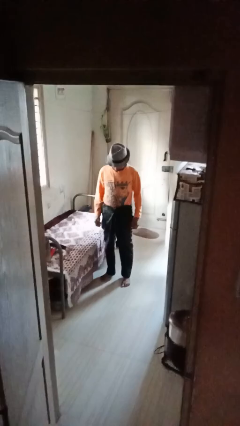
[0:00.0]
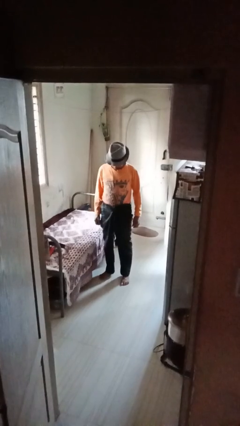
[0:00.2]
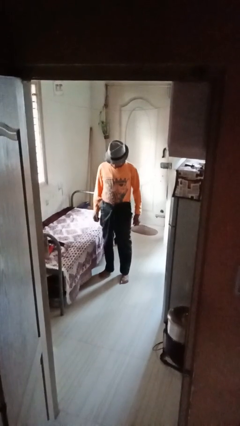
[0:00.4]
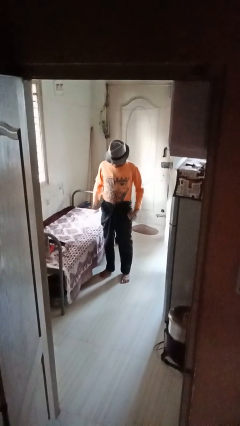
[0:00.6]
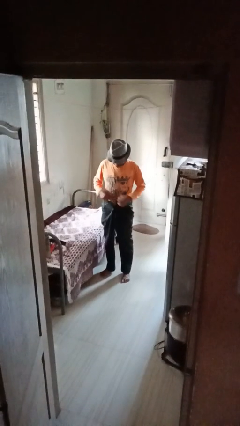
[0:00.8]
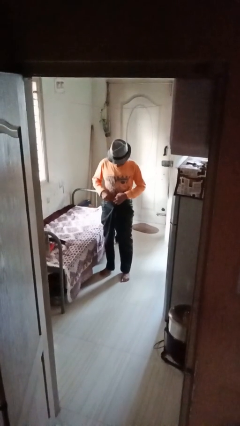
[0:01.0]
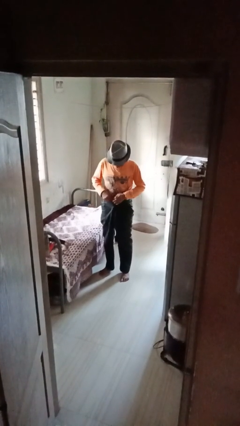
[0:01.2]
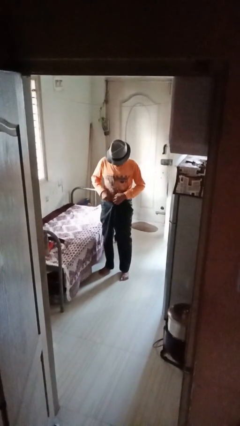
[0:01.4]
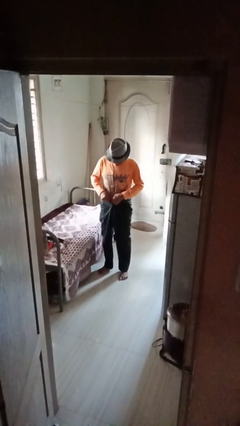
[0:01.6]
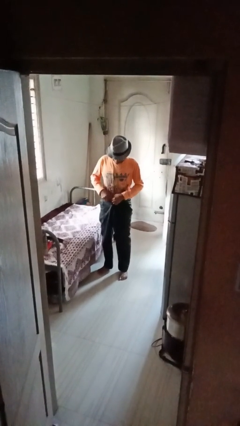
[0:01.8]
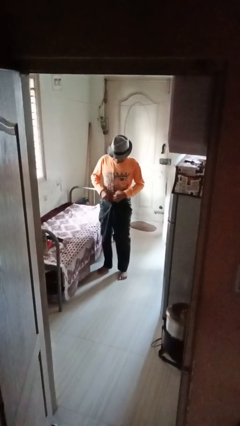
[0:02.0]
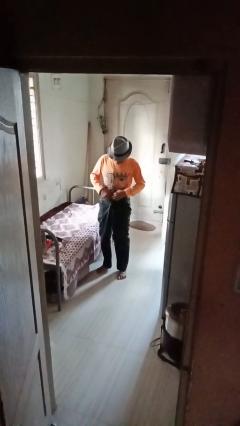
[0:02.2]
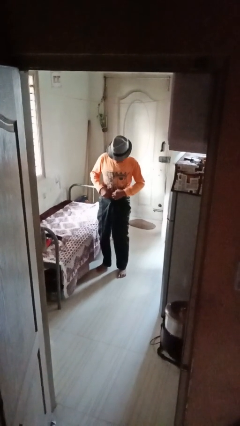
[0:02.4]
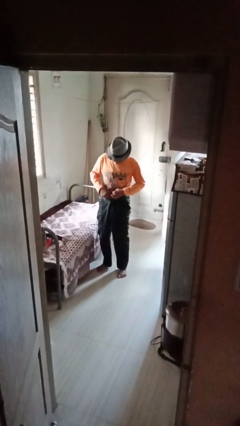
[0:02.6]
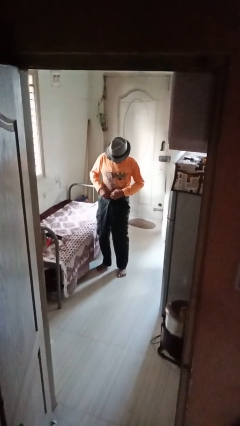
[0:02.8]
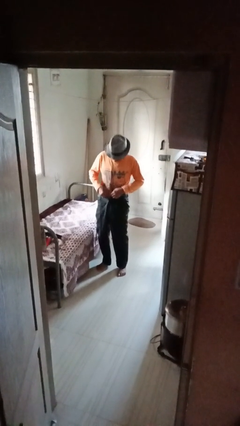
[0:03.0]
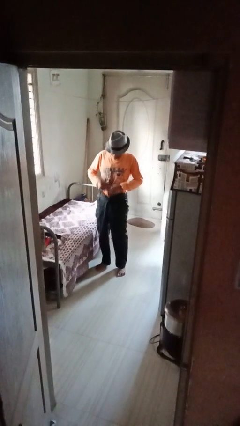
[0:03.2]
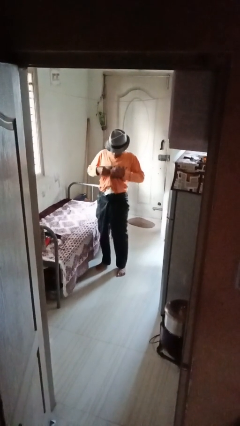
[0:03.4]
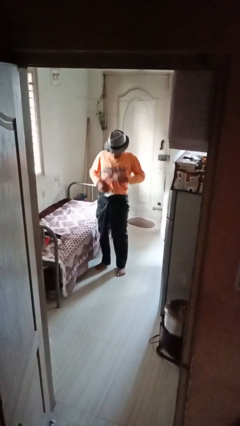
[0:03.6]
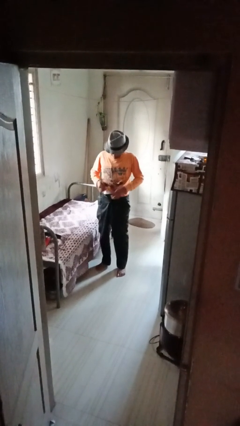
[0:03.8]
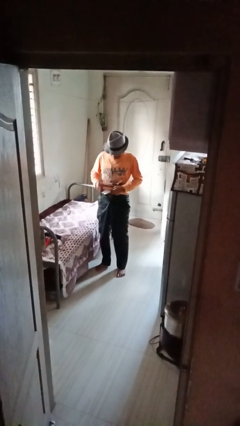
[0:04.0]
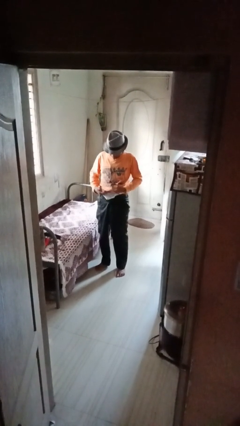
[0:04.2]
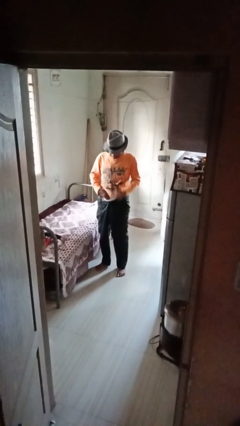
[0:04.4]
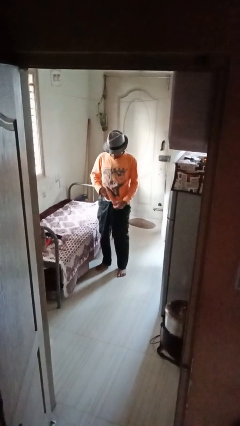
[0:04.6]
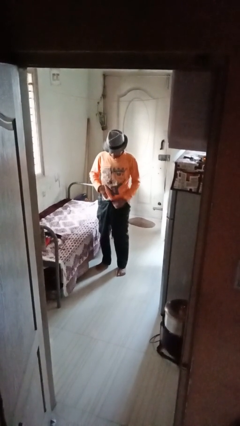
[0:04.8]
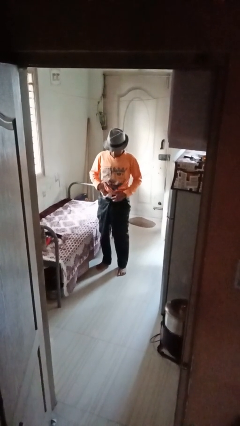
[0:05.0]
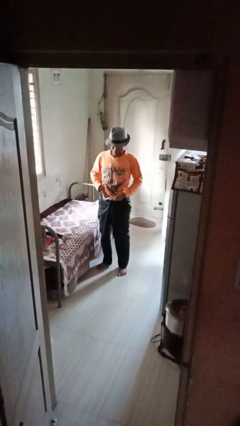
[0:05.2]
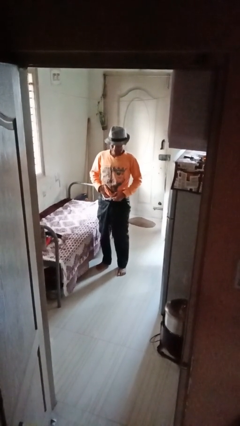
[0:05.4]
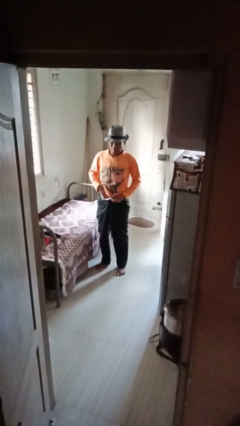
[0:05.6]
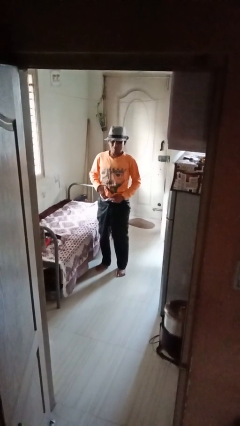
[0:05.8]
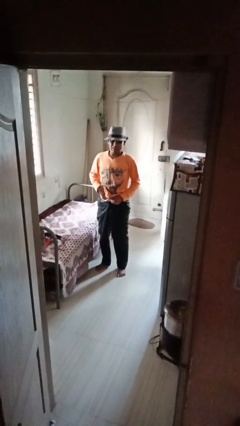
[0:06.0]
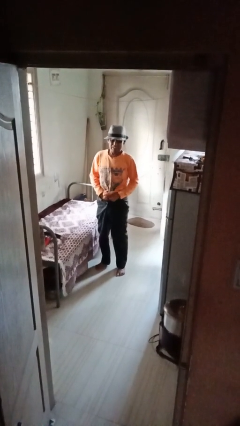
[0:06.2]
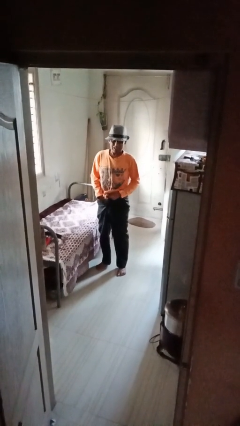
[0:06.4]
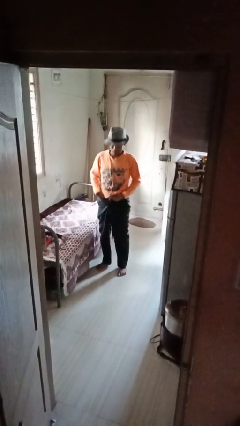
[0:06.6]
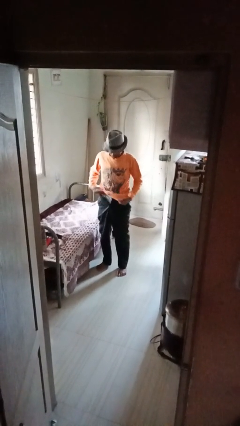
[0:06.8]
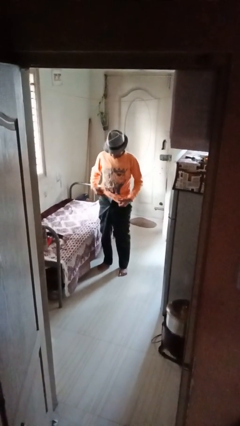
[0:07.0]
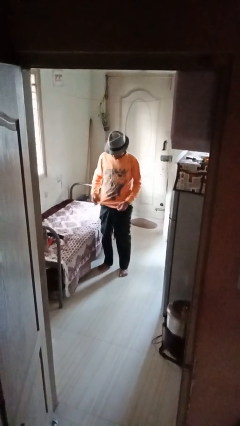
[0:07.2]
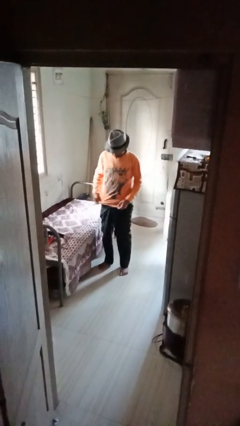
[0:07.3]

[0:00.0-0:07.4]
person untucks shirt

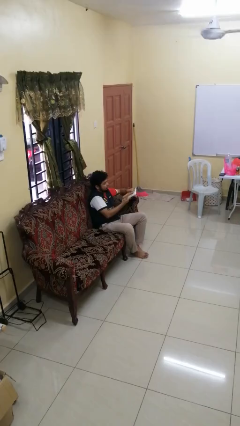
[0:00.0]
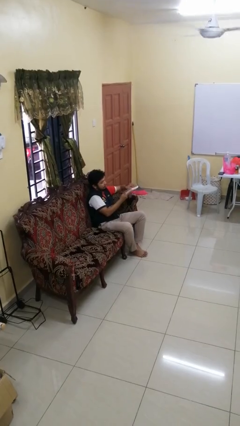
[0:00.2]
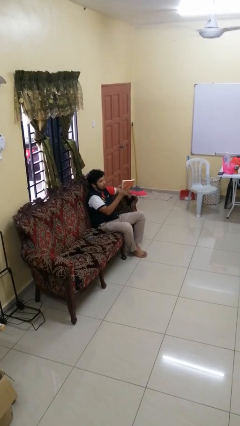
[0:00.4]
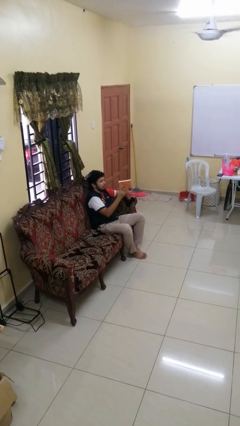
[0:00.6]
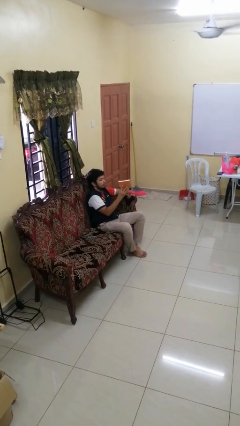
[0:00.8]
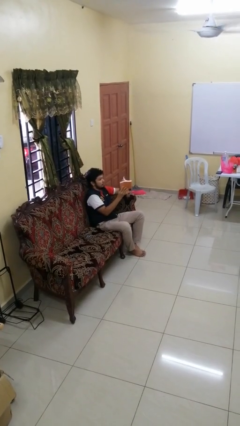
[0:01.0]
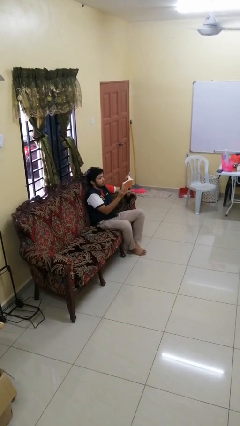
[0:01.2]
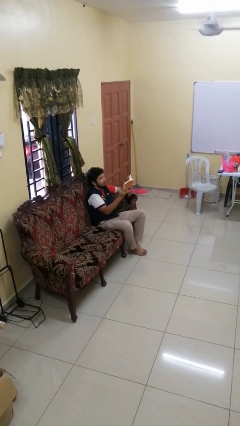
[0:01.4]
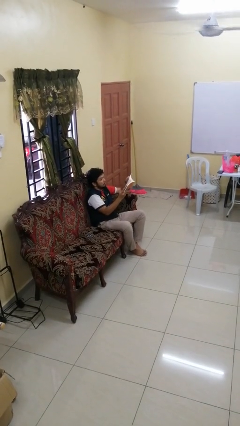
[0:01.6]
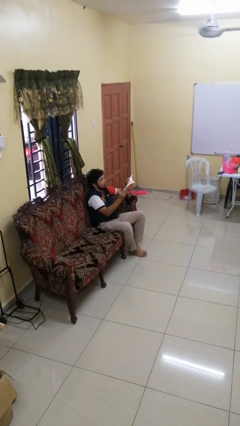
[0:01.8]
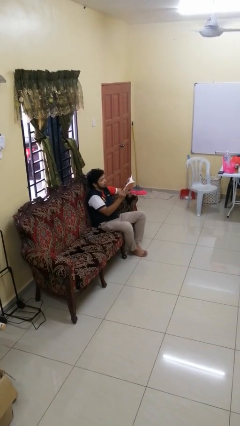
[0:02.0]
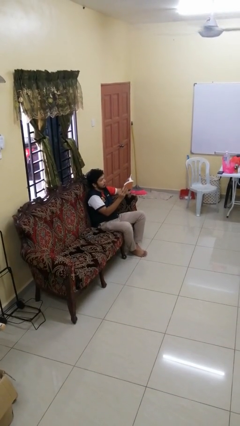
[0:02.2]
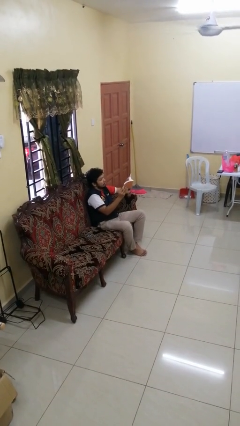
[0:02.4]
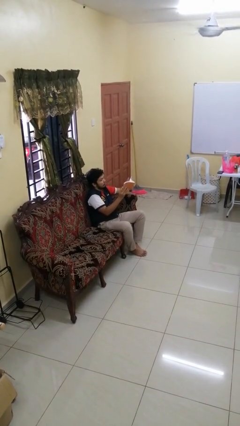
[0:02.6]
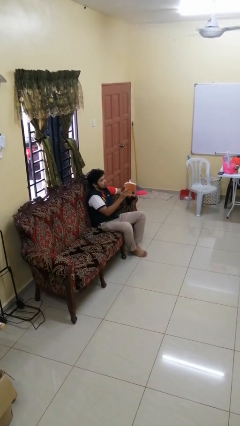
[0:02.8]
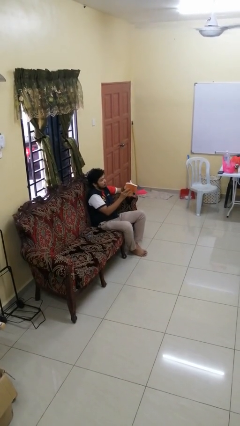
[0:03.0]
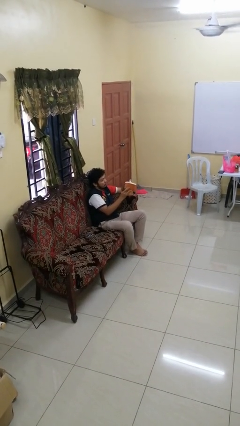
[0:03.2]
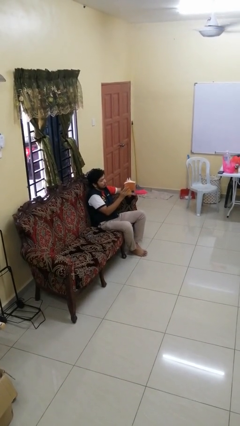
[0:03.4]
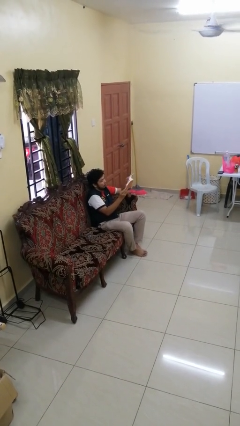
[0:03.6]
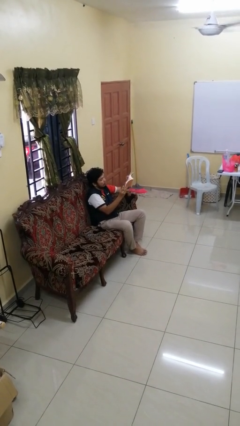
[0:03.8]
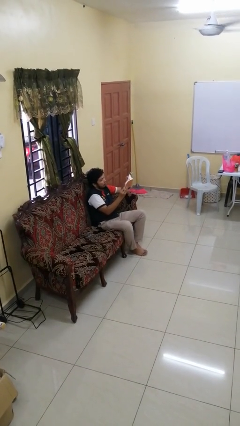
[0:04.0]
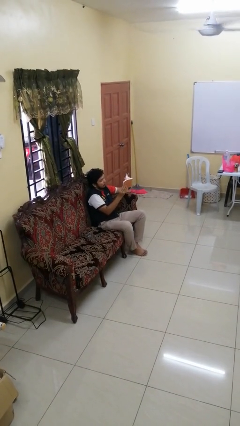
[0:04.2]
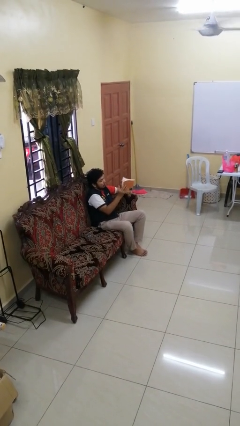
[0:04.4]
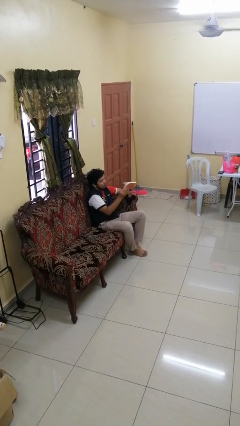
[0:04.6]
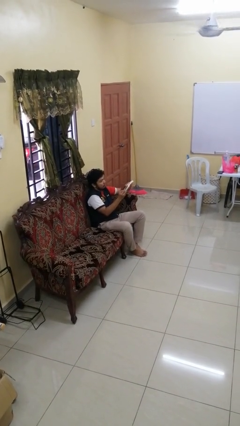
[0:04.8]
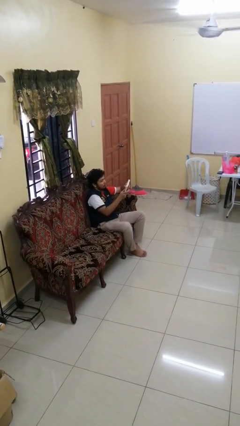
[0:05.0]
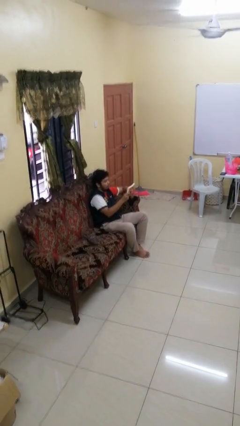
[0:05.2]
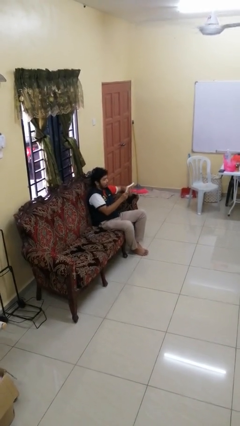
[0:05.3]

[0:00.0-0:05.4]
person reads book

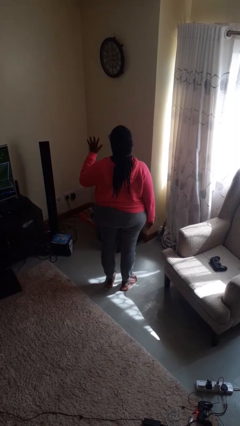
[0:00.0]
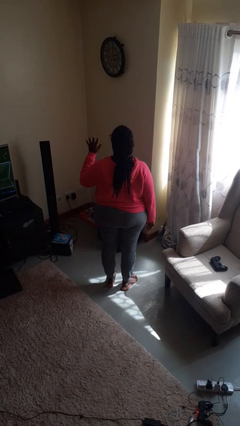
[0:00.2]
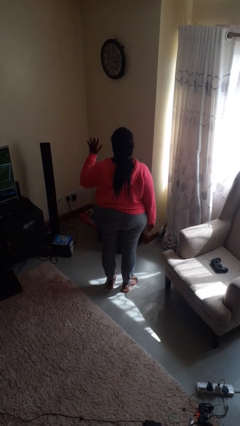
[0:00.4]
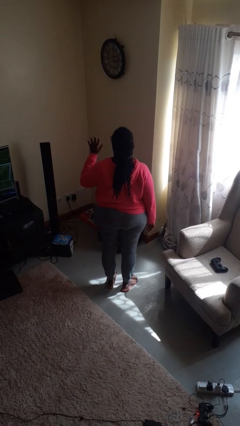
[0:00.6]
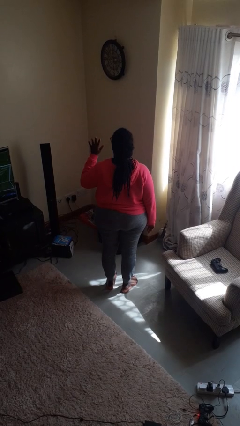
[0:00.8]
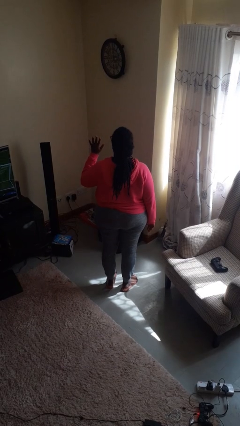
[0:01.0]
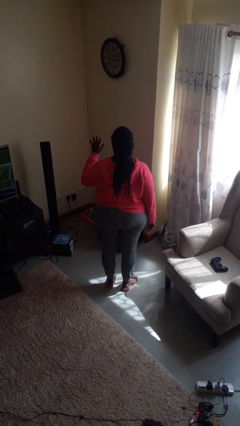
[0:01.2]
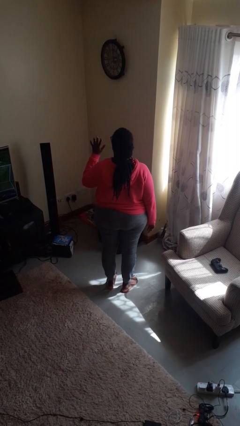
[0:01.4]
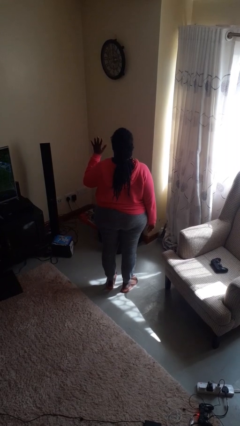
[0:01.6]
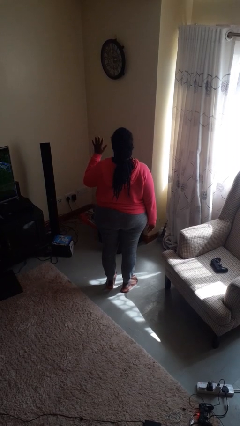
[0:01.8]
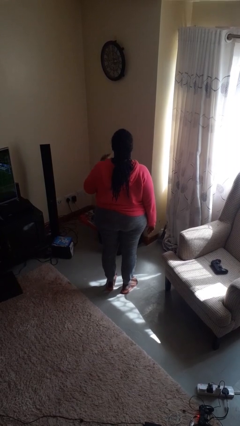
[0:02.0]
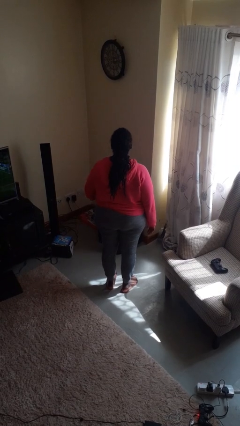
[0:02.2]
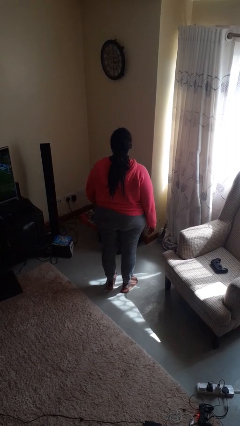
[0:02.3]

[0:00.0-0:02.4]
person gestures number five

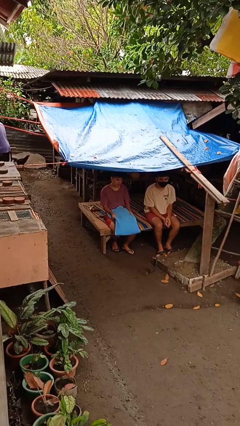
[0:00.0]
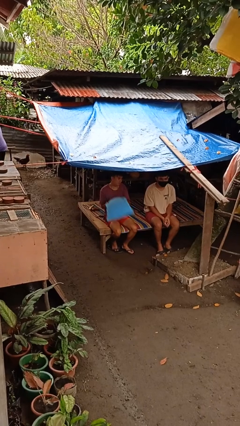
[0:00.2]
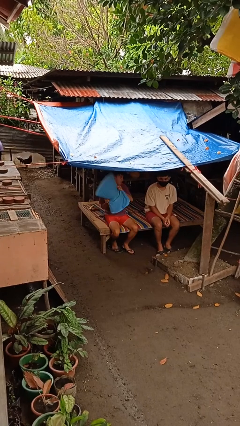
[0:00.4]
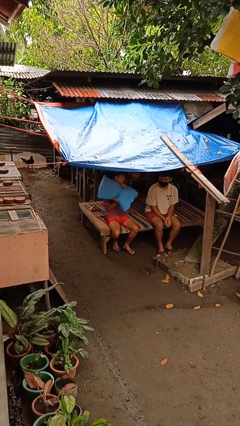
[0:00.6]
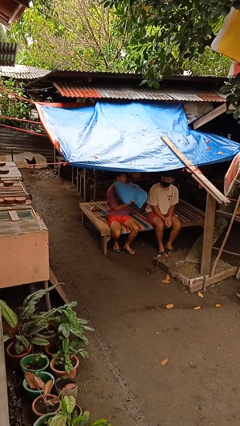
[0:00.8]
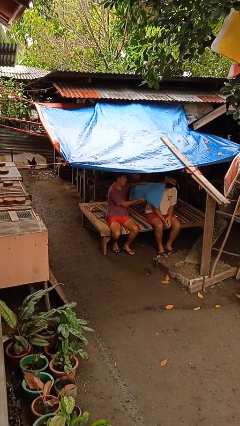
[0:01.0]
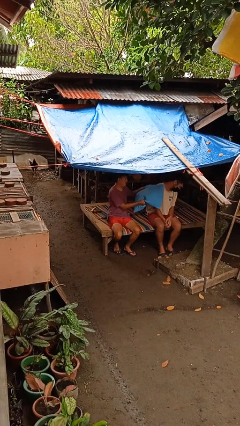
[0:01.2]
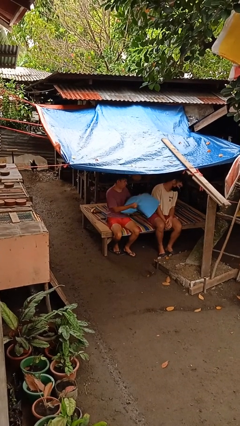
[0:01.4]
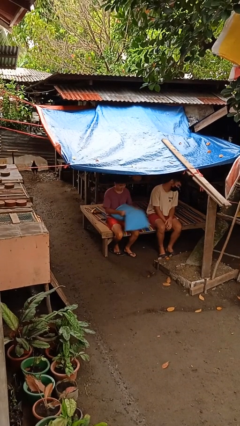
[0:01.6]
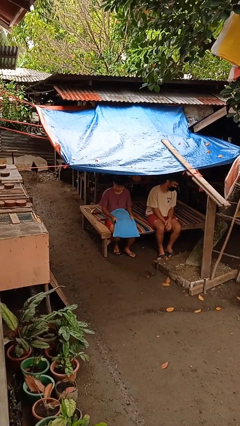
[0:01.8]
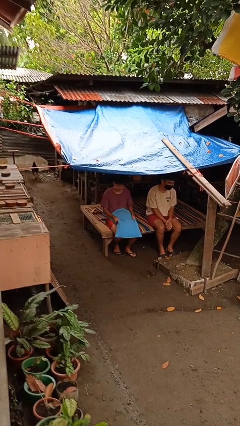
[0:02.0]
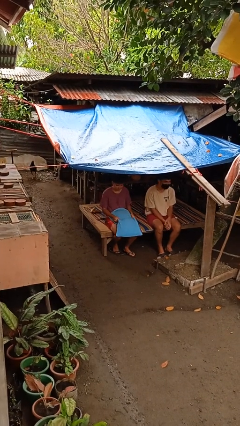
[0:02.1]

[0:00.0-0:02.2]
person hits person with pillow

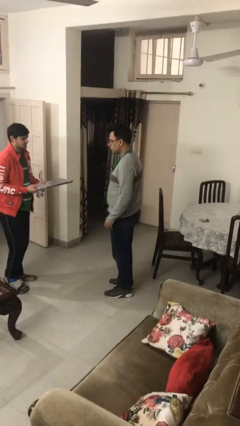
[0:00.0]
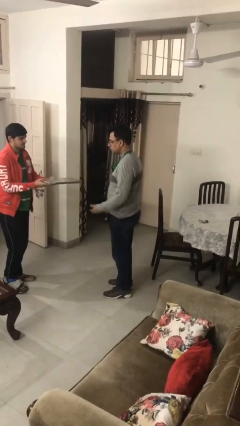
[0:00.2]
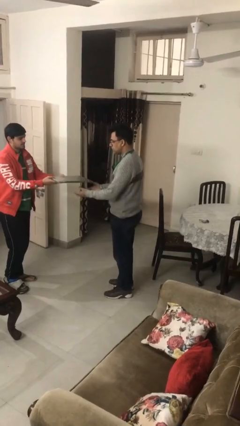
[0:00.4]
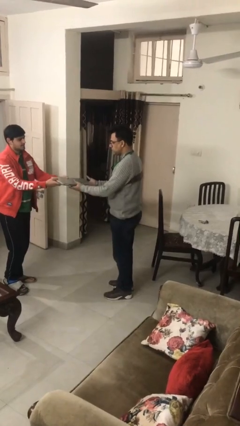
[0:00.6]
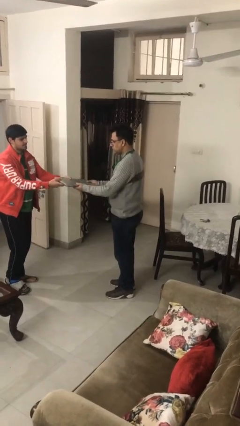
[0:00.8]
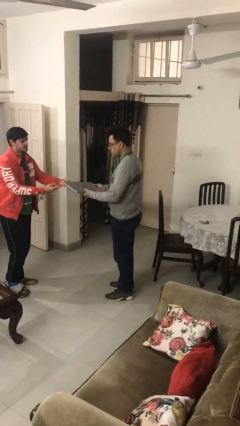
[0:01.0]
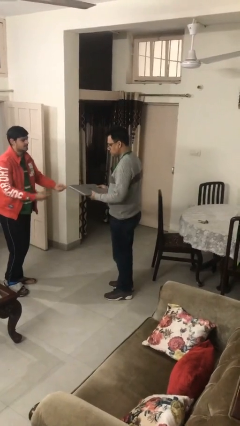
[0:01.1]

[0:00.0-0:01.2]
person transfers object to person
